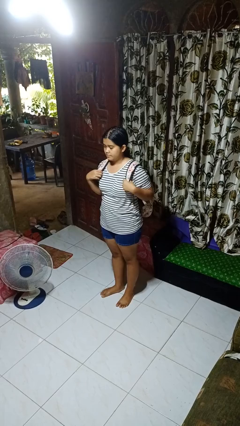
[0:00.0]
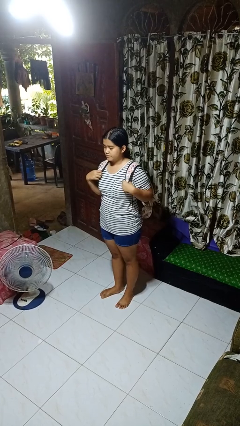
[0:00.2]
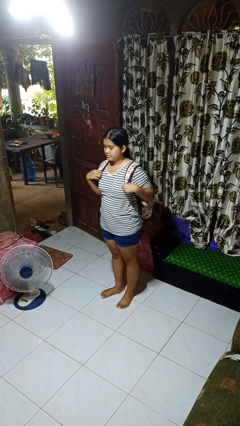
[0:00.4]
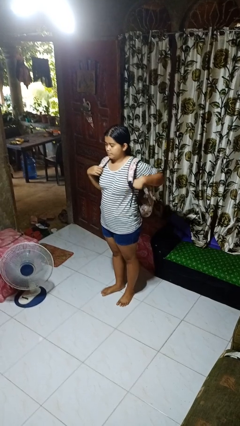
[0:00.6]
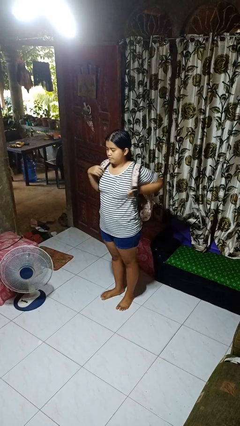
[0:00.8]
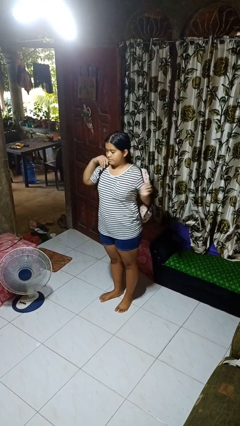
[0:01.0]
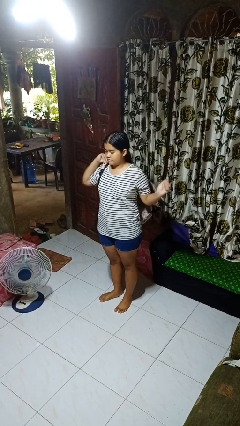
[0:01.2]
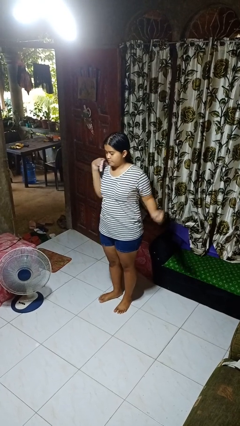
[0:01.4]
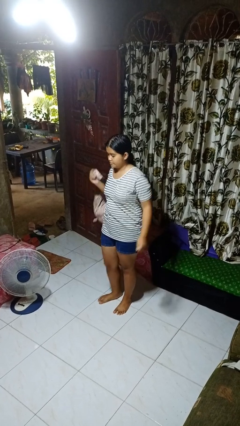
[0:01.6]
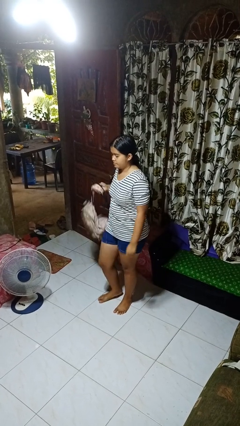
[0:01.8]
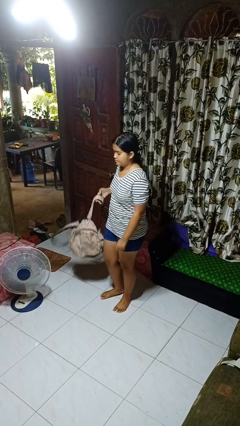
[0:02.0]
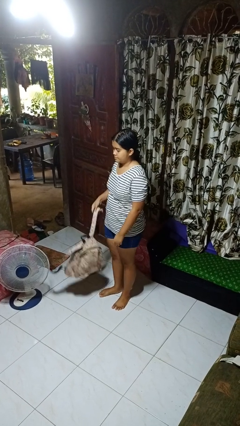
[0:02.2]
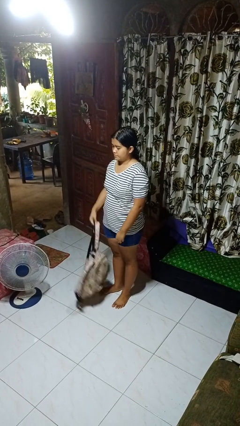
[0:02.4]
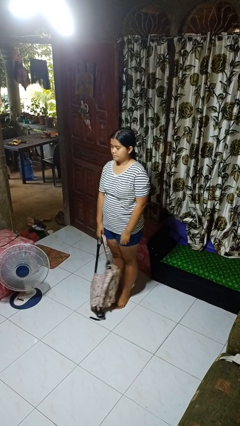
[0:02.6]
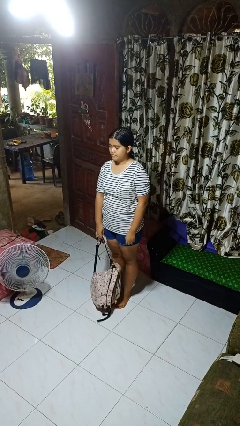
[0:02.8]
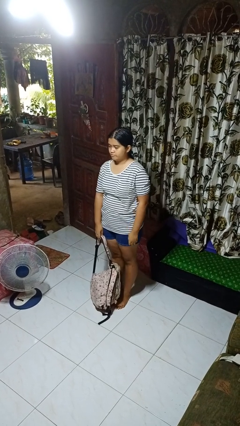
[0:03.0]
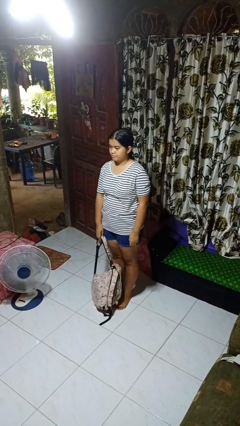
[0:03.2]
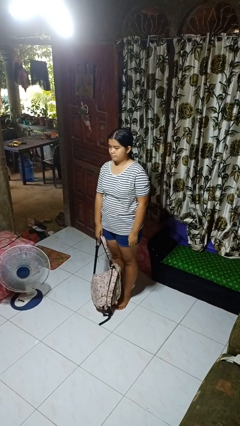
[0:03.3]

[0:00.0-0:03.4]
person takes off backpack

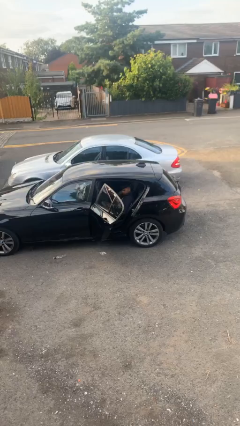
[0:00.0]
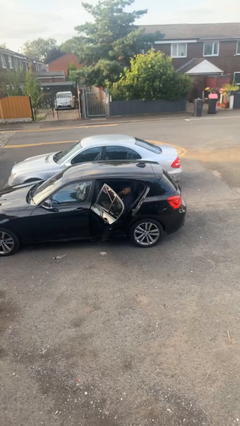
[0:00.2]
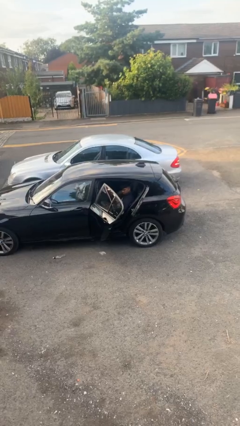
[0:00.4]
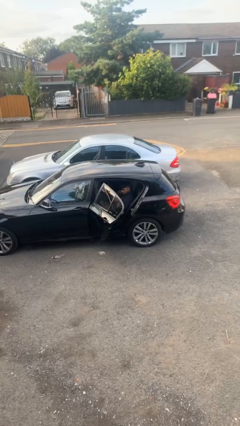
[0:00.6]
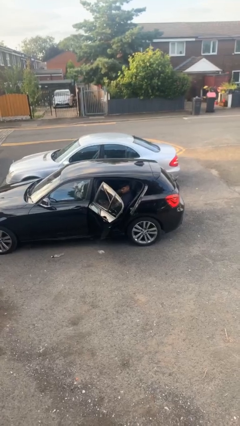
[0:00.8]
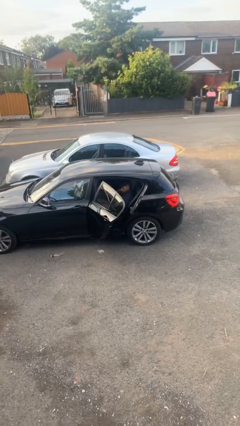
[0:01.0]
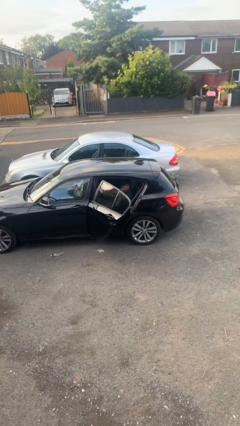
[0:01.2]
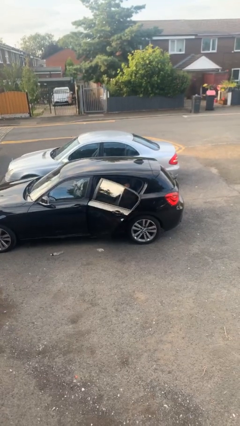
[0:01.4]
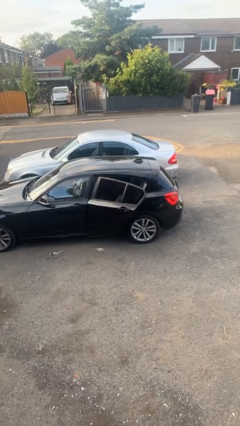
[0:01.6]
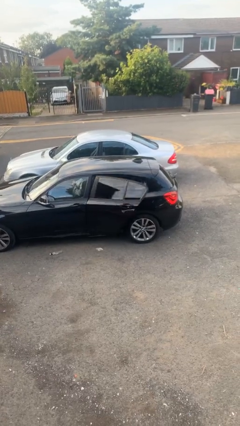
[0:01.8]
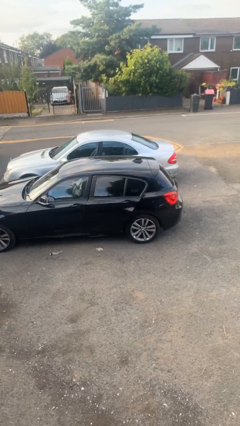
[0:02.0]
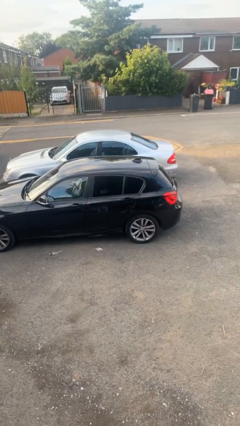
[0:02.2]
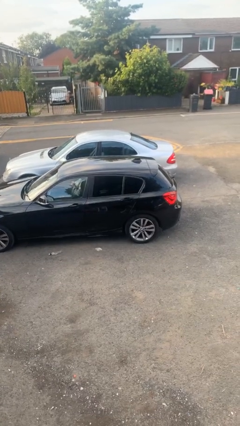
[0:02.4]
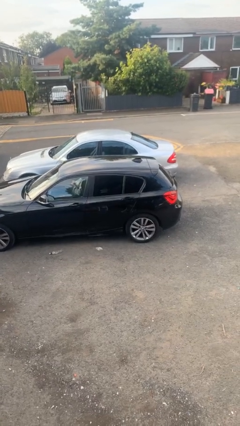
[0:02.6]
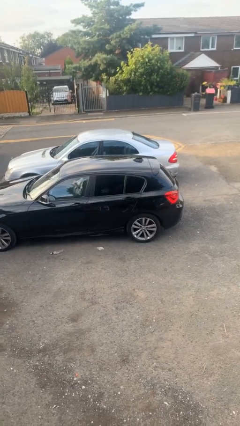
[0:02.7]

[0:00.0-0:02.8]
person closes car door

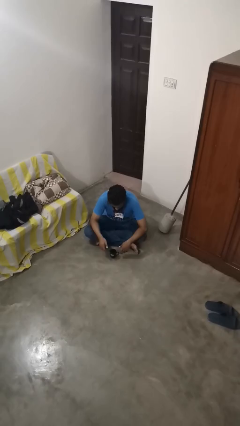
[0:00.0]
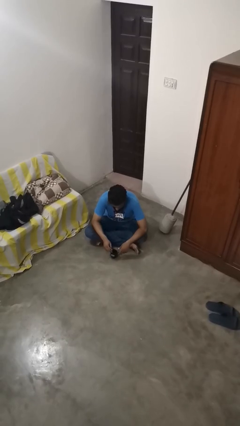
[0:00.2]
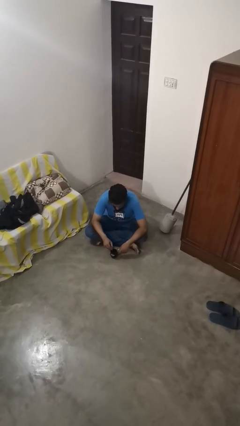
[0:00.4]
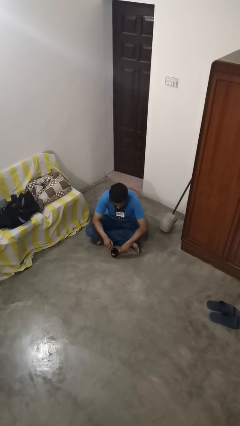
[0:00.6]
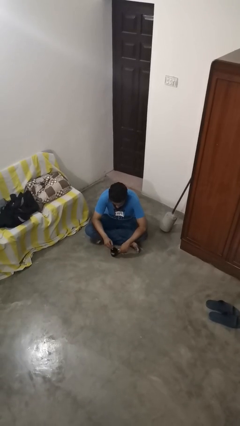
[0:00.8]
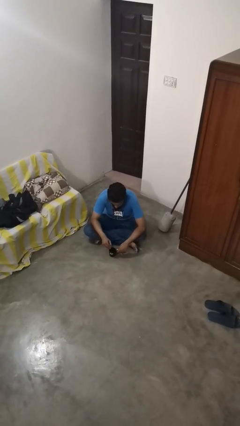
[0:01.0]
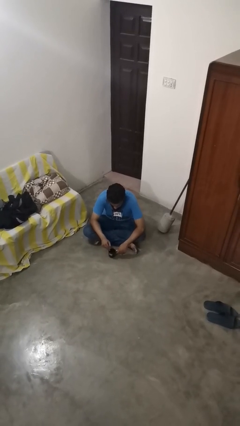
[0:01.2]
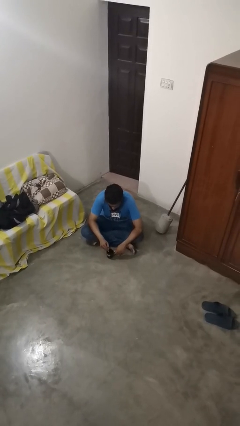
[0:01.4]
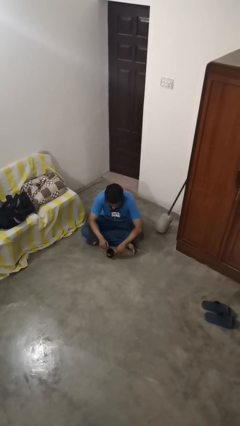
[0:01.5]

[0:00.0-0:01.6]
person stirs mug

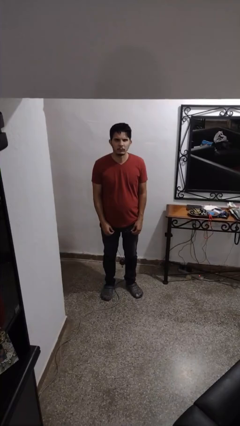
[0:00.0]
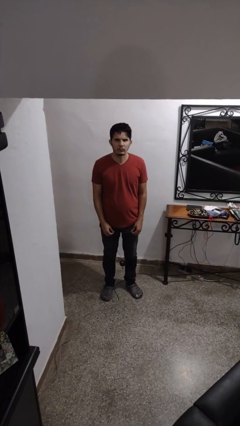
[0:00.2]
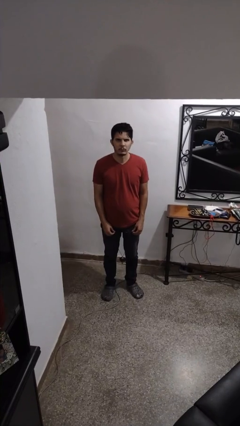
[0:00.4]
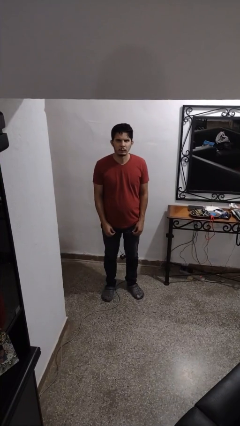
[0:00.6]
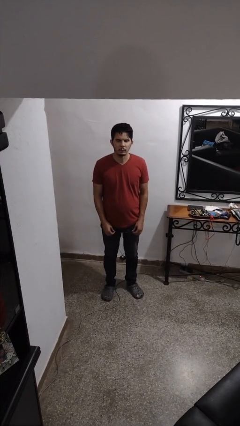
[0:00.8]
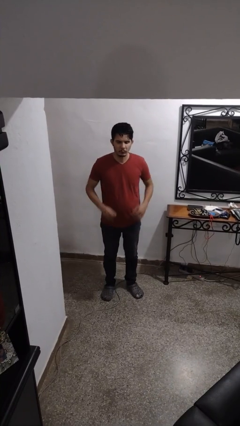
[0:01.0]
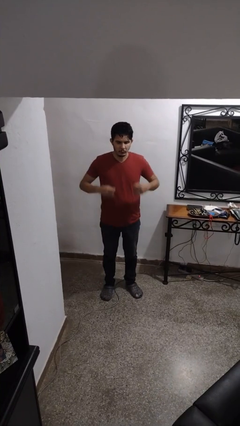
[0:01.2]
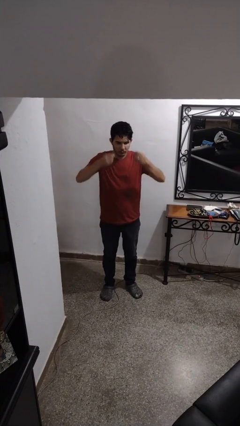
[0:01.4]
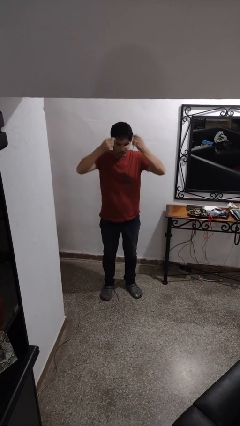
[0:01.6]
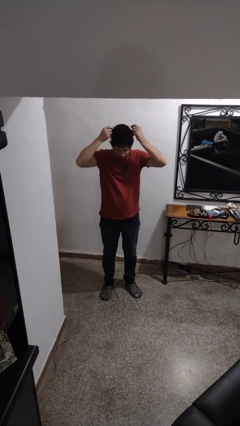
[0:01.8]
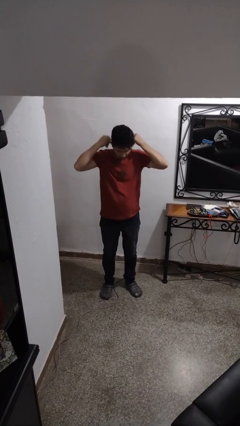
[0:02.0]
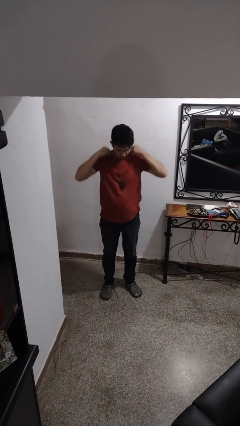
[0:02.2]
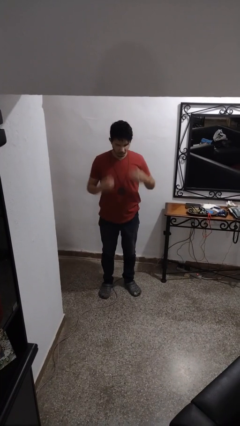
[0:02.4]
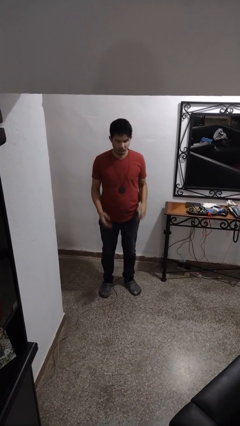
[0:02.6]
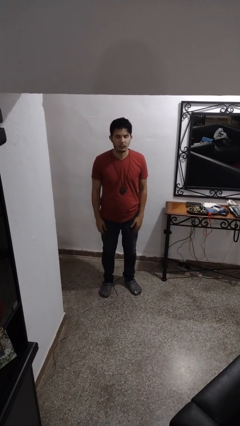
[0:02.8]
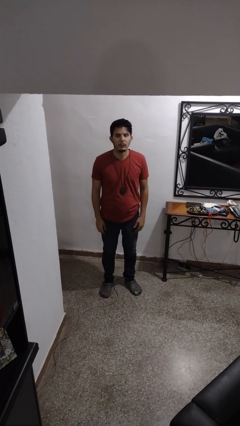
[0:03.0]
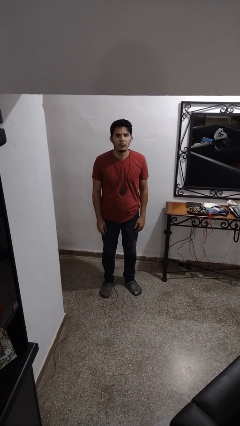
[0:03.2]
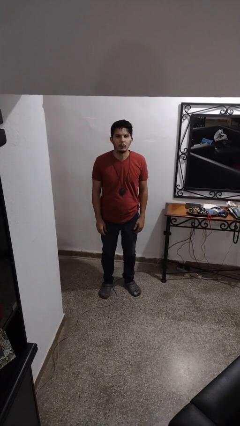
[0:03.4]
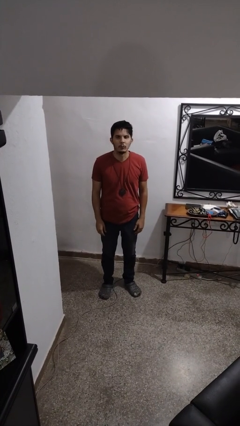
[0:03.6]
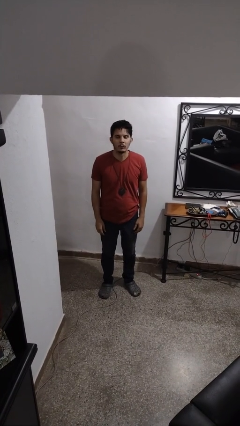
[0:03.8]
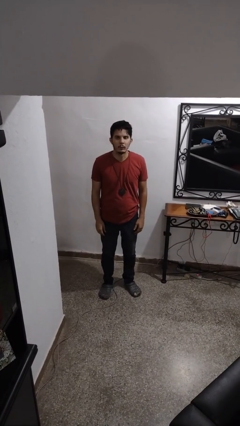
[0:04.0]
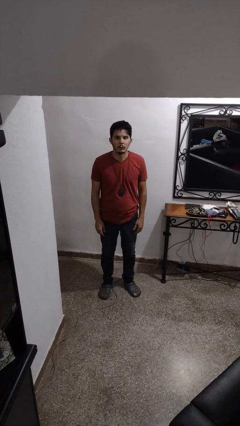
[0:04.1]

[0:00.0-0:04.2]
person puts on necklace

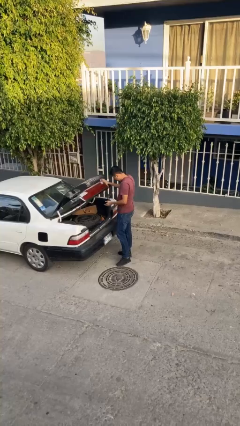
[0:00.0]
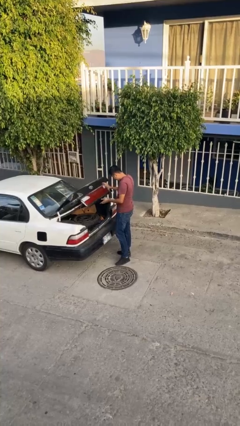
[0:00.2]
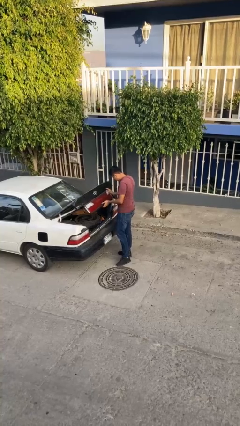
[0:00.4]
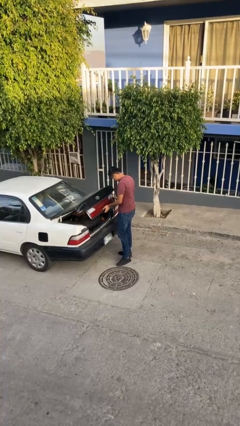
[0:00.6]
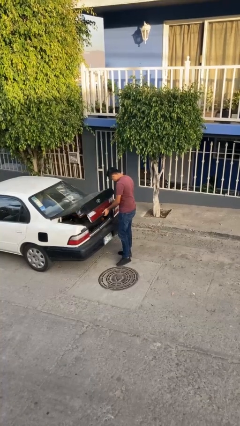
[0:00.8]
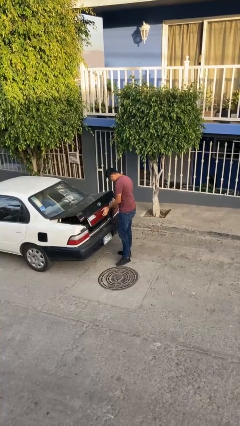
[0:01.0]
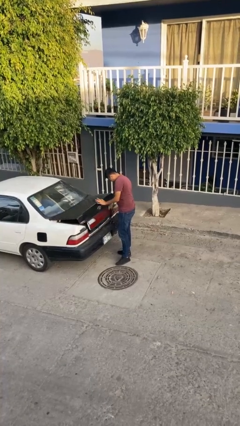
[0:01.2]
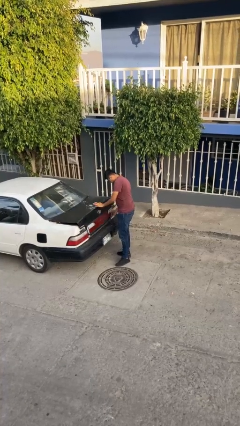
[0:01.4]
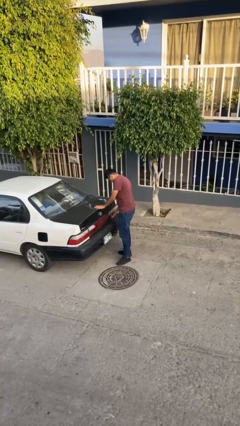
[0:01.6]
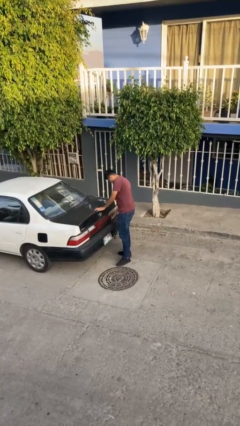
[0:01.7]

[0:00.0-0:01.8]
person closes car trunk

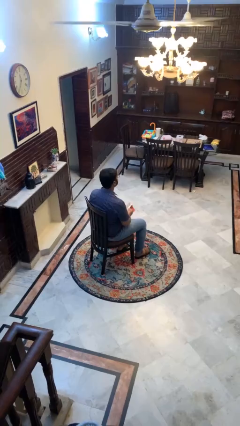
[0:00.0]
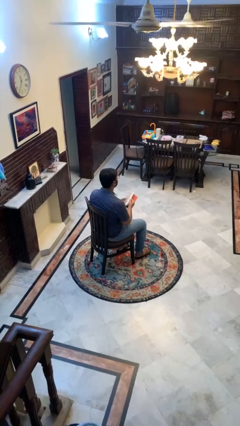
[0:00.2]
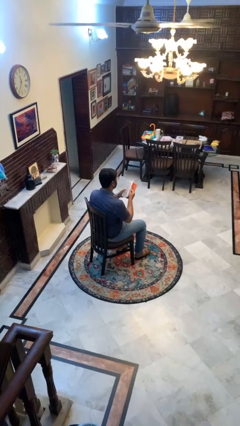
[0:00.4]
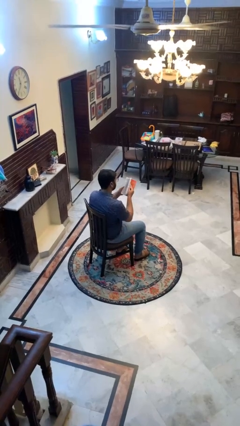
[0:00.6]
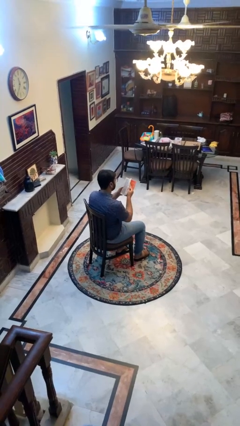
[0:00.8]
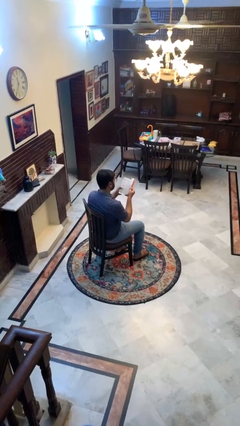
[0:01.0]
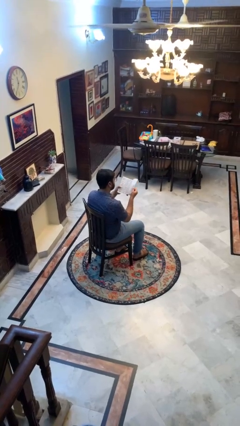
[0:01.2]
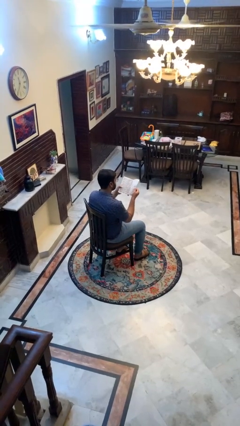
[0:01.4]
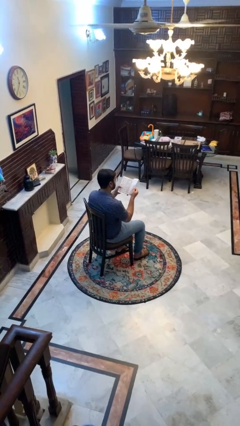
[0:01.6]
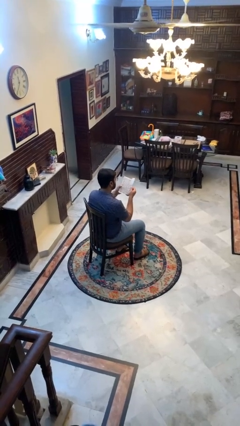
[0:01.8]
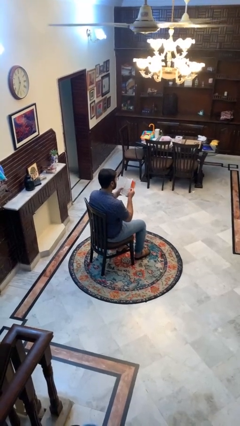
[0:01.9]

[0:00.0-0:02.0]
person reads magazine

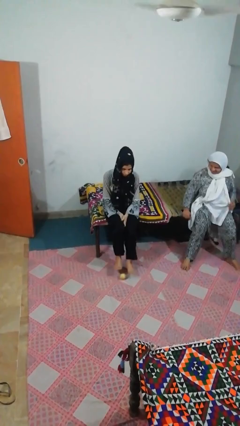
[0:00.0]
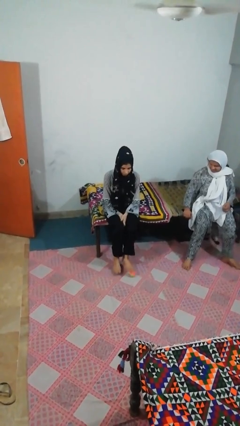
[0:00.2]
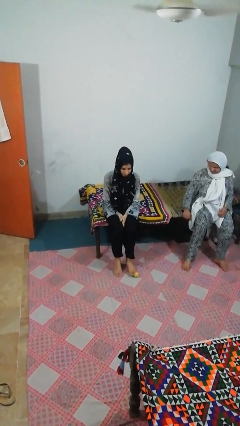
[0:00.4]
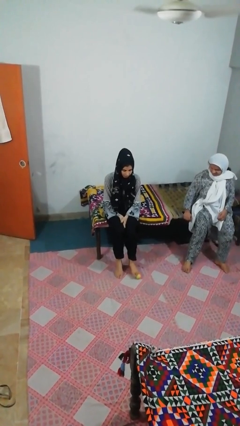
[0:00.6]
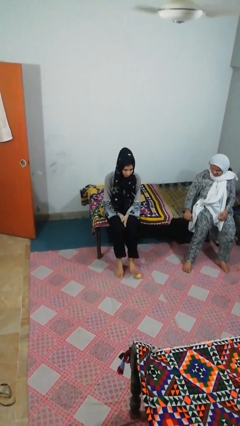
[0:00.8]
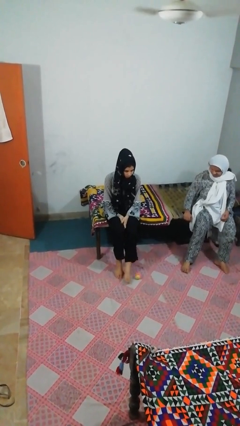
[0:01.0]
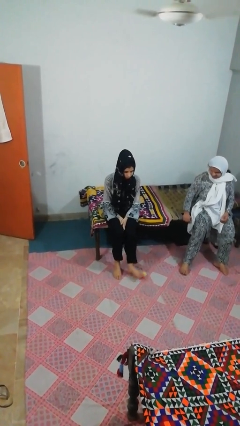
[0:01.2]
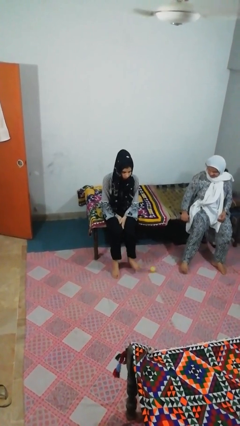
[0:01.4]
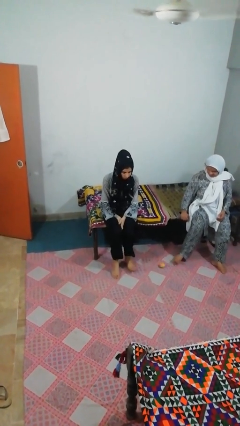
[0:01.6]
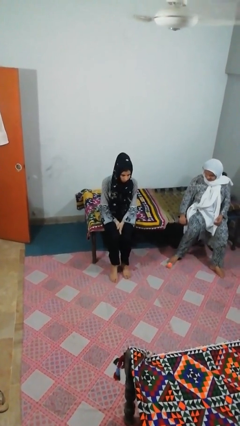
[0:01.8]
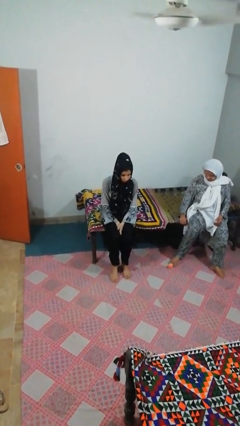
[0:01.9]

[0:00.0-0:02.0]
person kicks object to person
